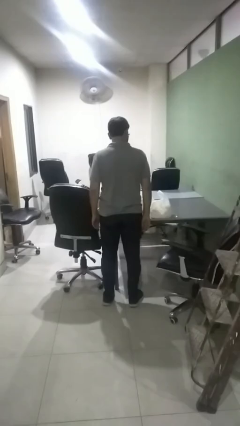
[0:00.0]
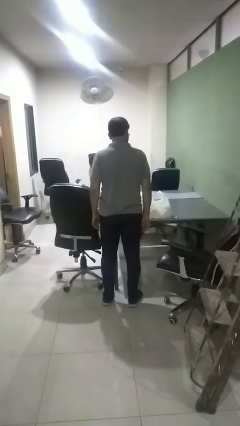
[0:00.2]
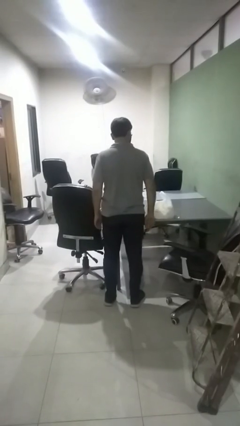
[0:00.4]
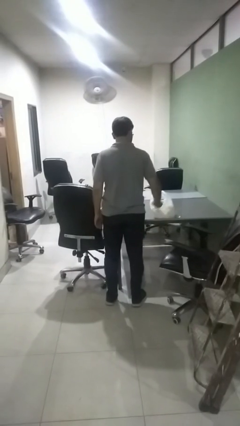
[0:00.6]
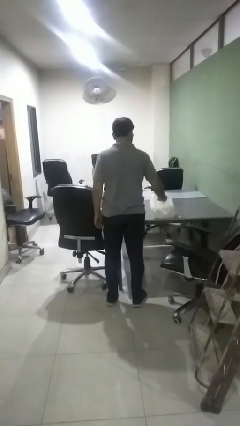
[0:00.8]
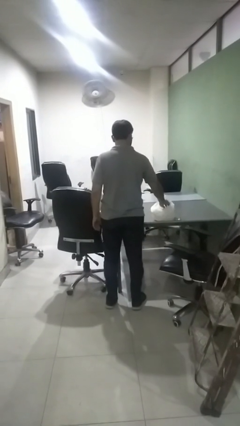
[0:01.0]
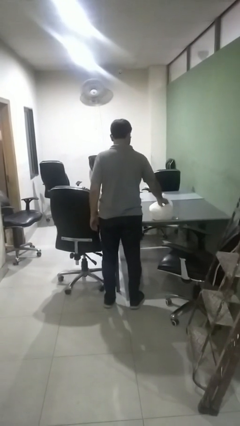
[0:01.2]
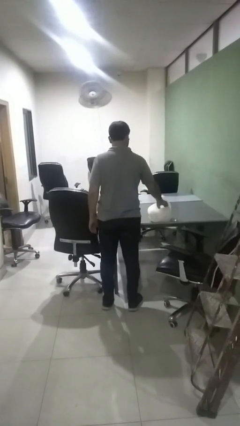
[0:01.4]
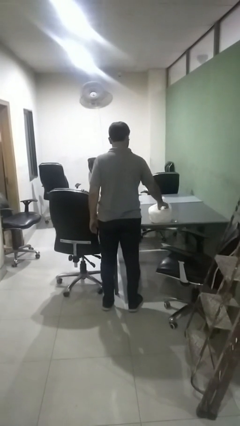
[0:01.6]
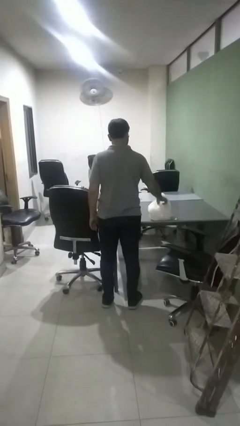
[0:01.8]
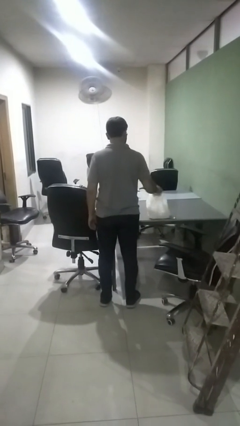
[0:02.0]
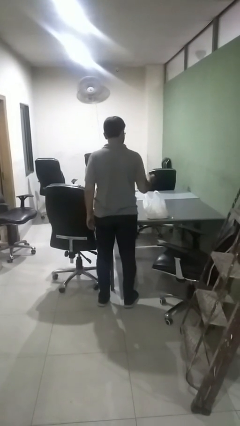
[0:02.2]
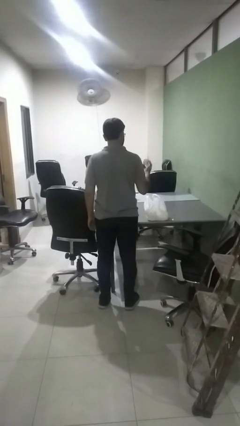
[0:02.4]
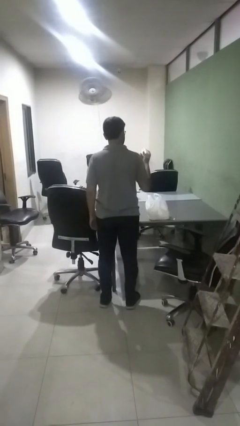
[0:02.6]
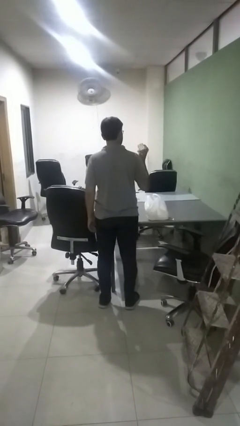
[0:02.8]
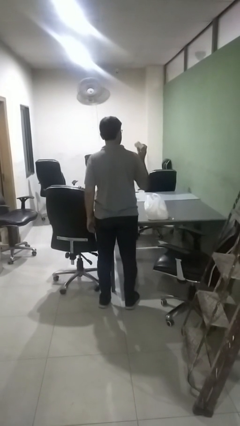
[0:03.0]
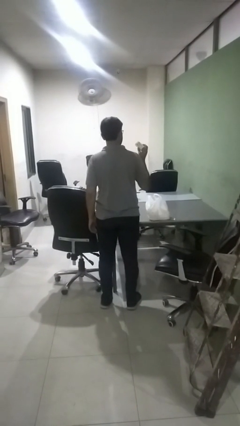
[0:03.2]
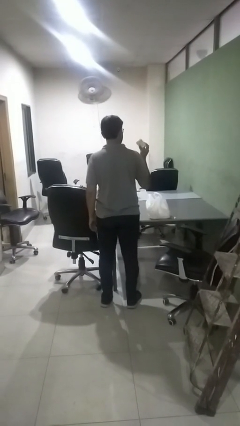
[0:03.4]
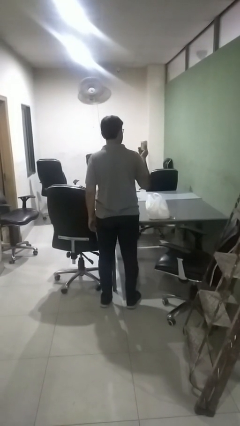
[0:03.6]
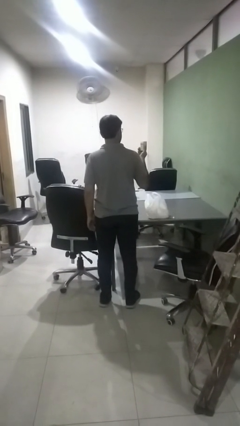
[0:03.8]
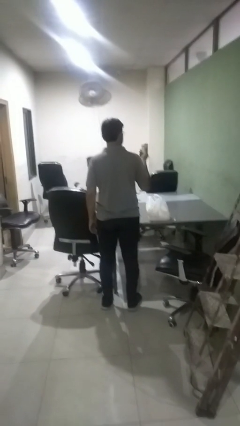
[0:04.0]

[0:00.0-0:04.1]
person takes object from bag

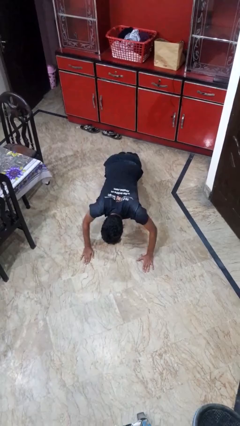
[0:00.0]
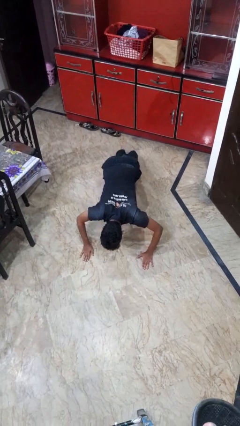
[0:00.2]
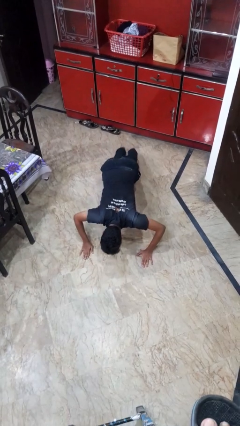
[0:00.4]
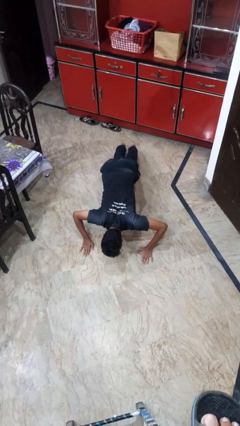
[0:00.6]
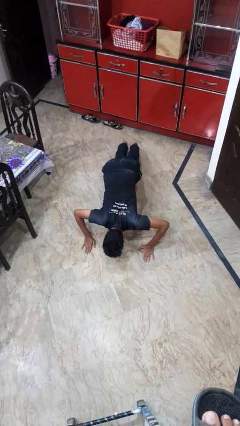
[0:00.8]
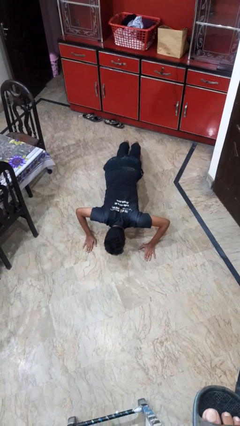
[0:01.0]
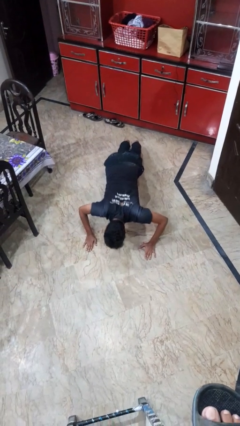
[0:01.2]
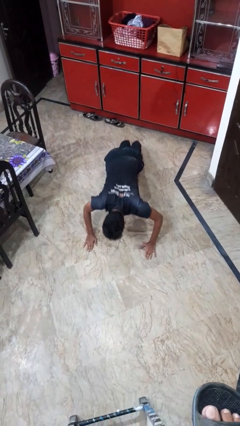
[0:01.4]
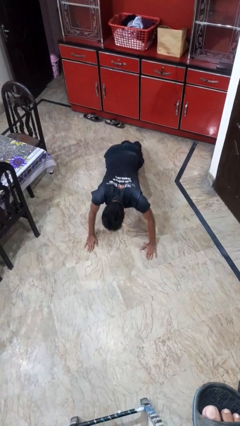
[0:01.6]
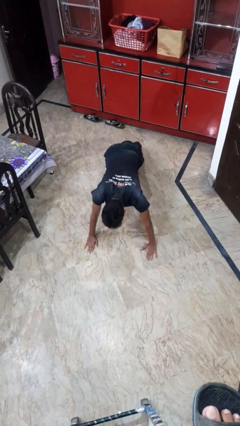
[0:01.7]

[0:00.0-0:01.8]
person exercises with pushup

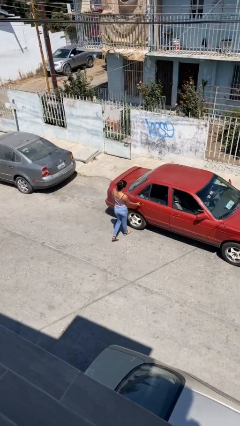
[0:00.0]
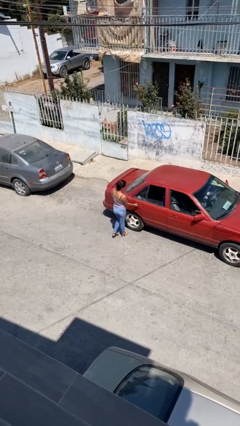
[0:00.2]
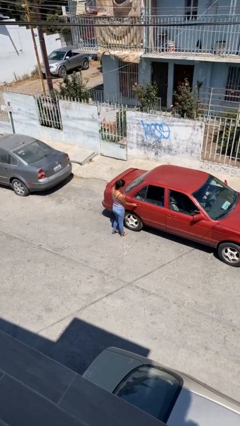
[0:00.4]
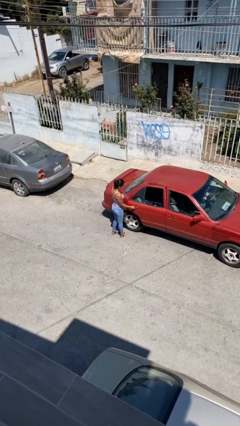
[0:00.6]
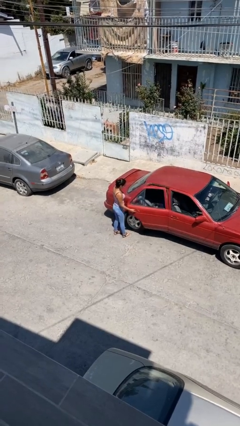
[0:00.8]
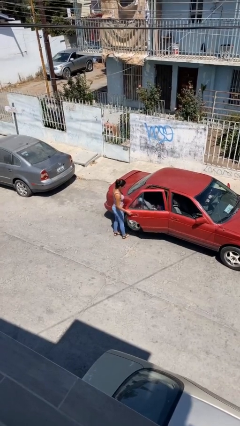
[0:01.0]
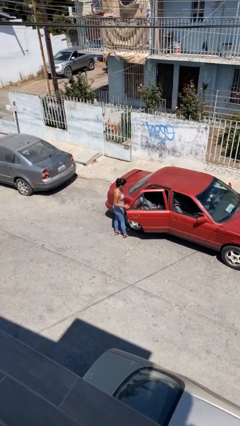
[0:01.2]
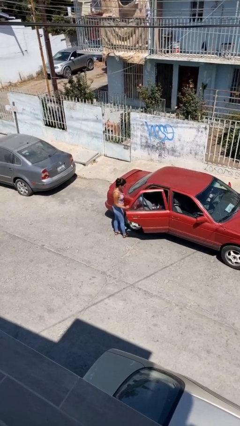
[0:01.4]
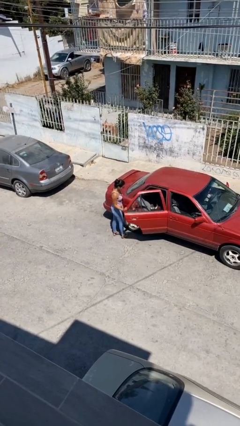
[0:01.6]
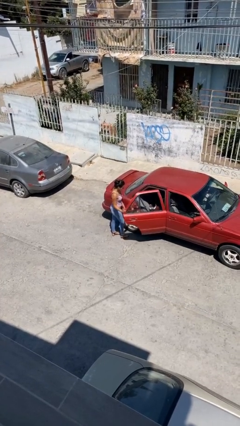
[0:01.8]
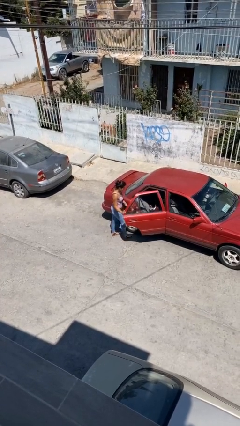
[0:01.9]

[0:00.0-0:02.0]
person opens car door

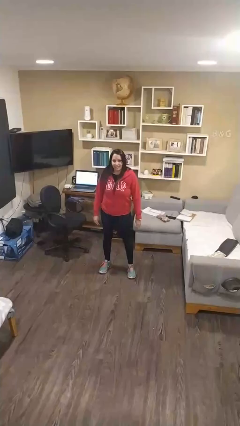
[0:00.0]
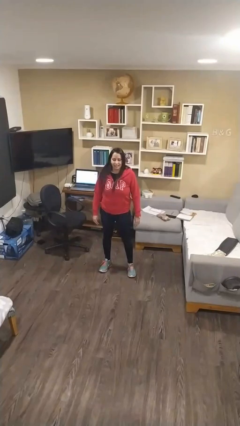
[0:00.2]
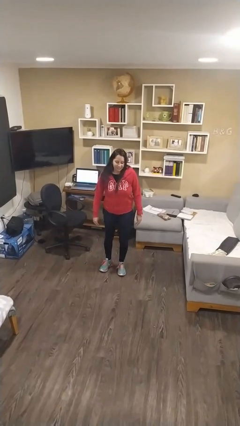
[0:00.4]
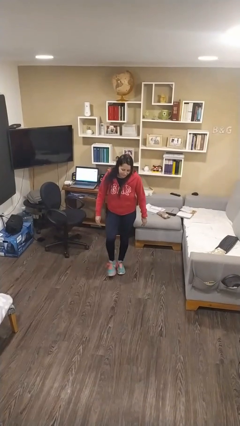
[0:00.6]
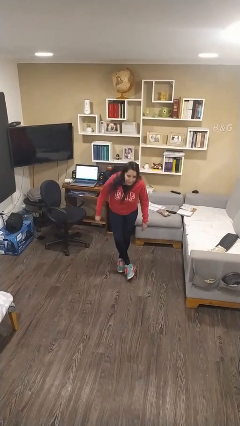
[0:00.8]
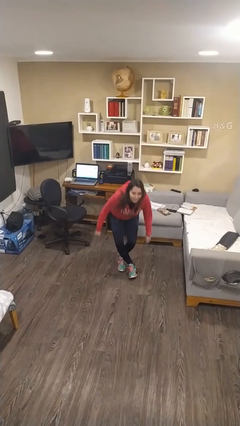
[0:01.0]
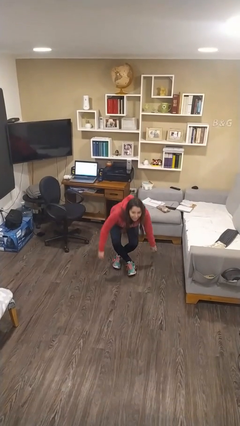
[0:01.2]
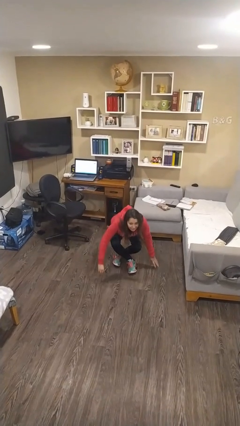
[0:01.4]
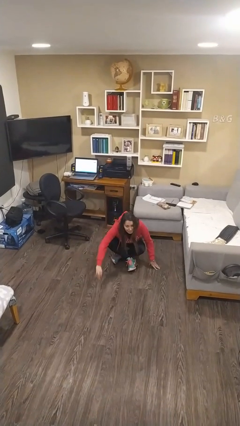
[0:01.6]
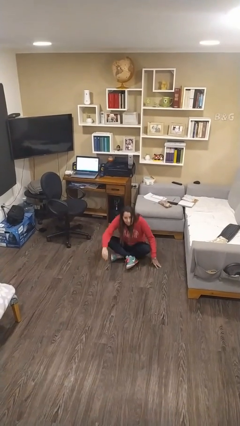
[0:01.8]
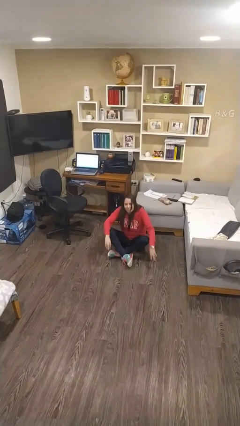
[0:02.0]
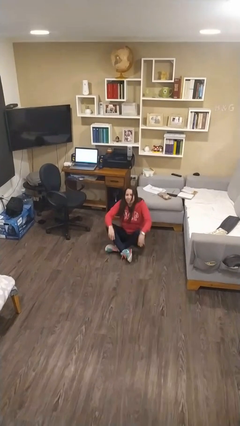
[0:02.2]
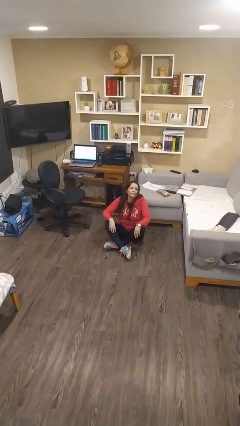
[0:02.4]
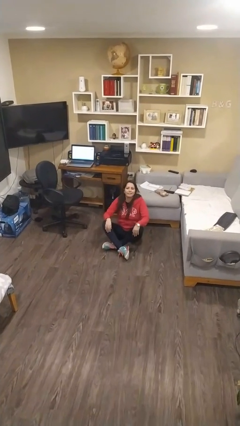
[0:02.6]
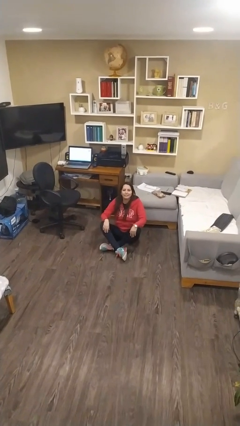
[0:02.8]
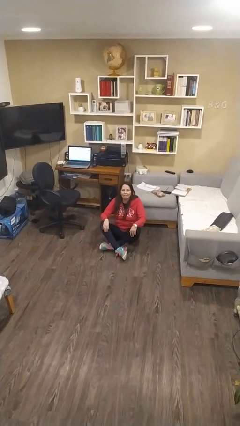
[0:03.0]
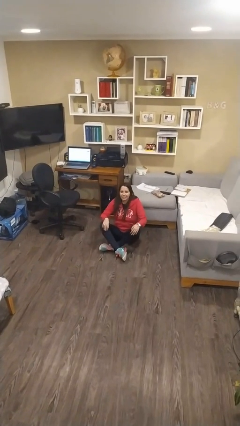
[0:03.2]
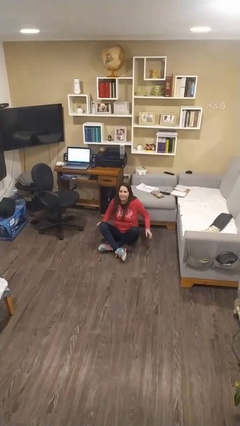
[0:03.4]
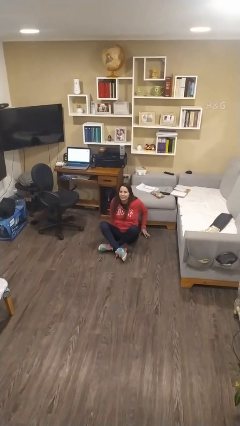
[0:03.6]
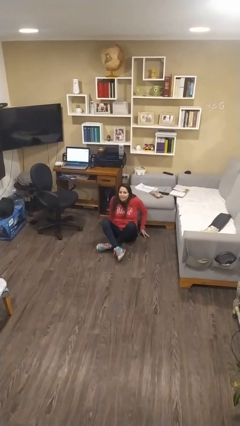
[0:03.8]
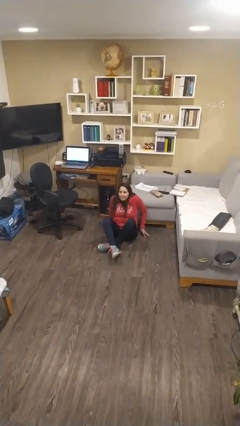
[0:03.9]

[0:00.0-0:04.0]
person sits crisscross

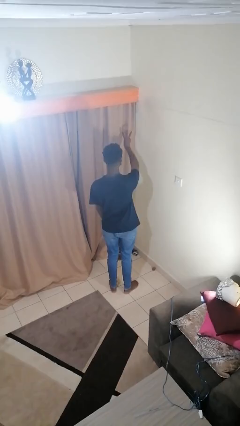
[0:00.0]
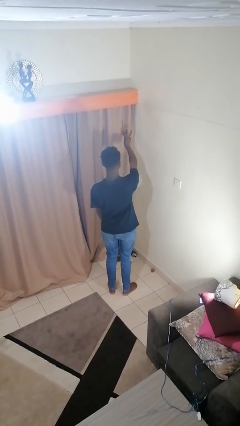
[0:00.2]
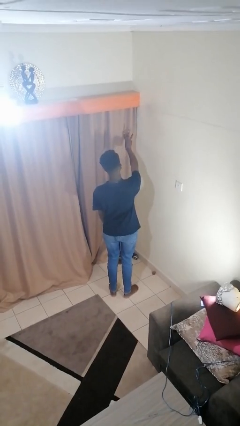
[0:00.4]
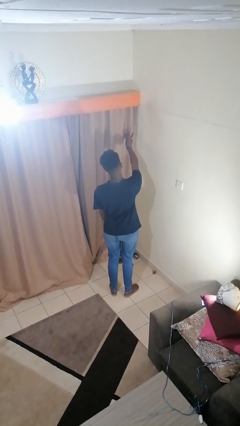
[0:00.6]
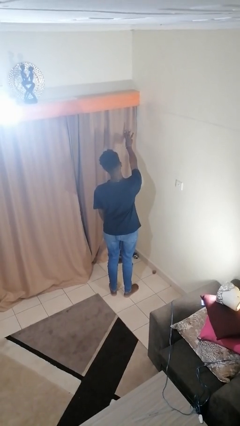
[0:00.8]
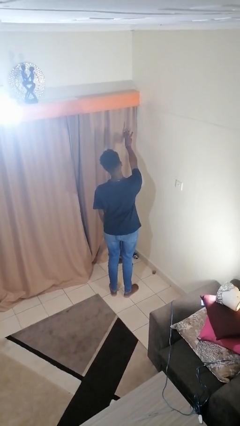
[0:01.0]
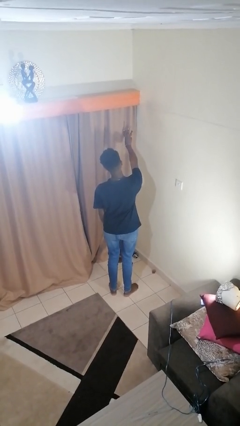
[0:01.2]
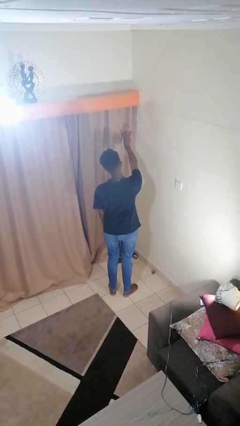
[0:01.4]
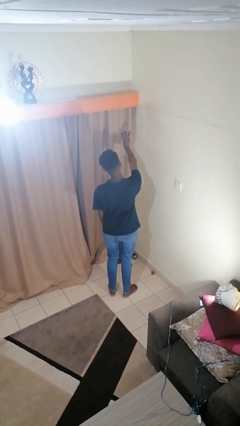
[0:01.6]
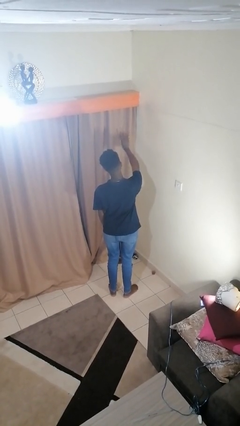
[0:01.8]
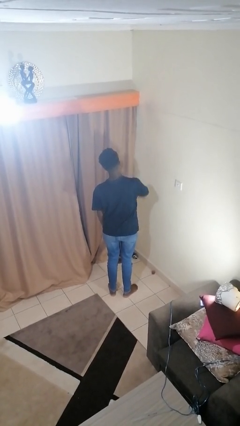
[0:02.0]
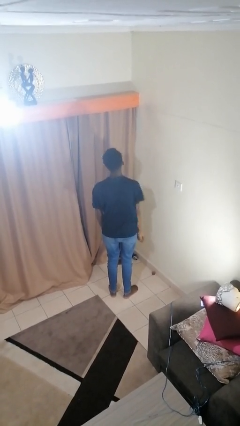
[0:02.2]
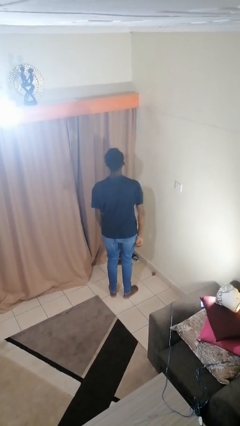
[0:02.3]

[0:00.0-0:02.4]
person gestures number three

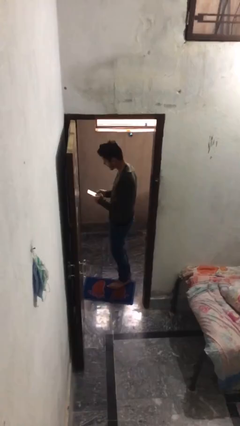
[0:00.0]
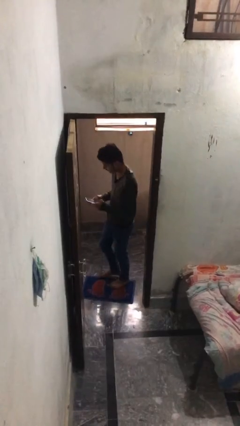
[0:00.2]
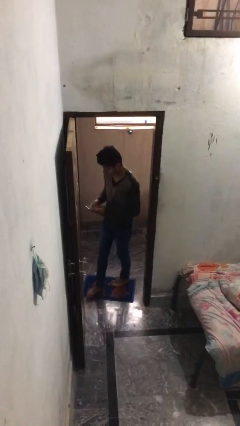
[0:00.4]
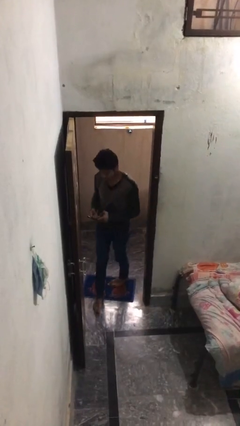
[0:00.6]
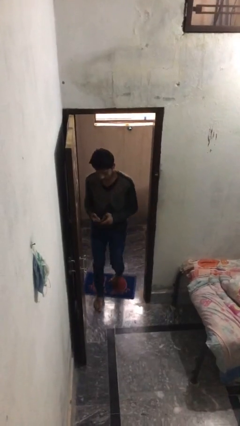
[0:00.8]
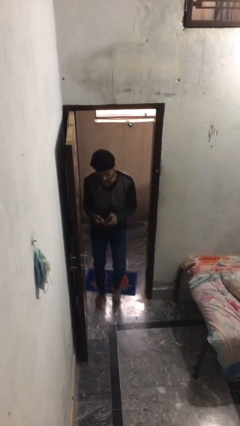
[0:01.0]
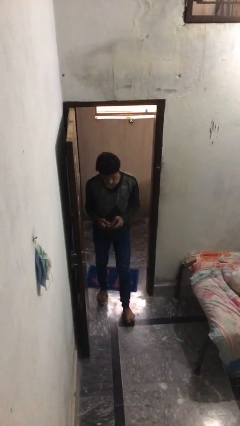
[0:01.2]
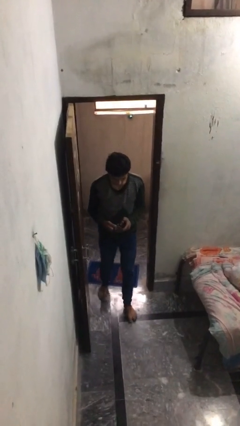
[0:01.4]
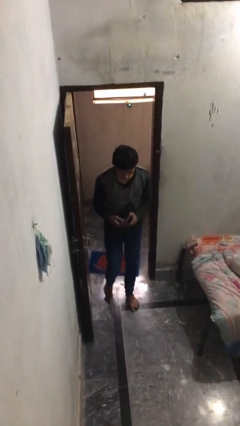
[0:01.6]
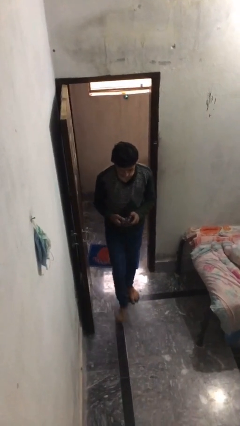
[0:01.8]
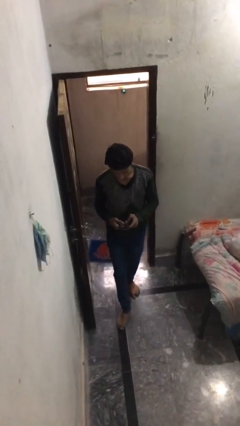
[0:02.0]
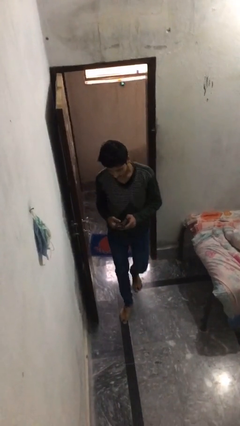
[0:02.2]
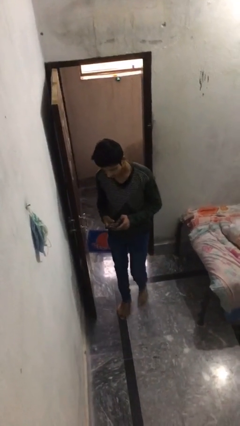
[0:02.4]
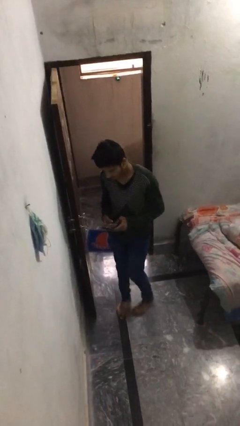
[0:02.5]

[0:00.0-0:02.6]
person enters scene through structure

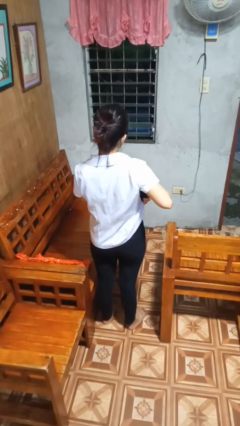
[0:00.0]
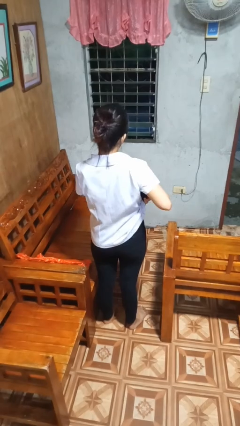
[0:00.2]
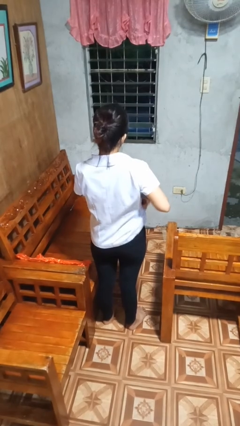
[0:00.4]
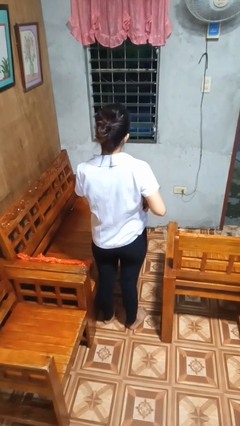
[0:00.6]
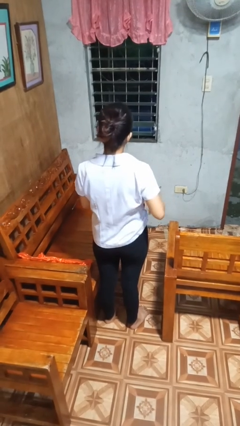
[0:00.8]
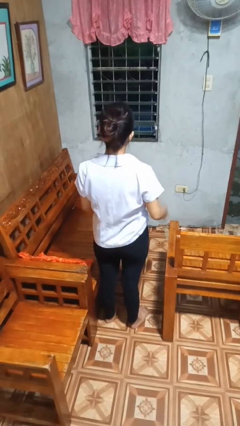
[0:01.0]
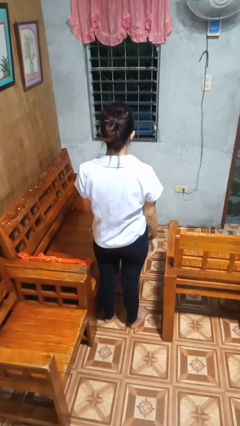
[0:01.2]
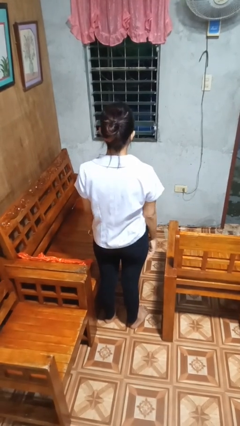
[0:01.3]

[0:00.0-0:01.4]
person puts phone into pocket
